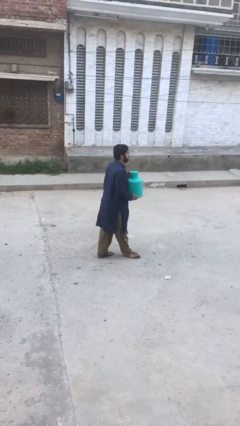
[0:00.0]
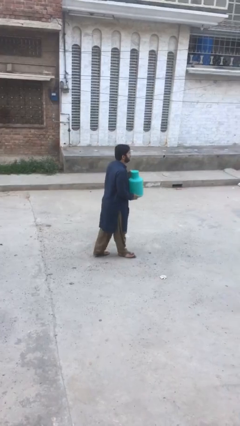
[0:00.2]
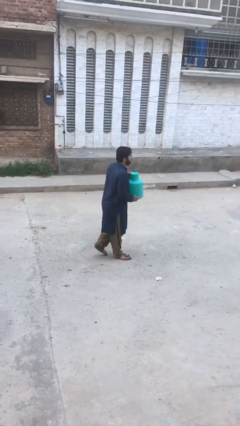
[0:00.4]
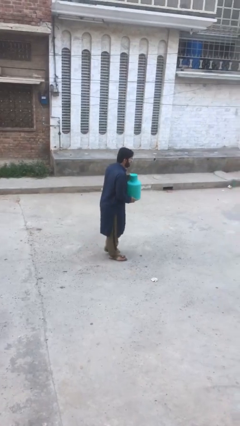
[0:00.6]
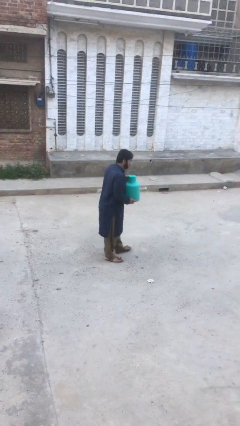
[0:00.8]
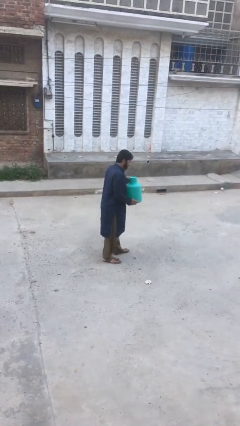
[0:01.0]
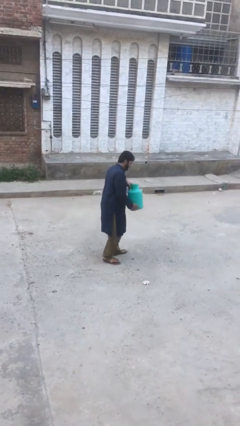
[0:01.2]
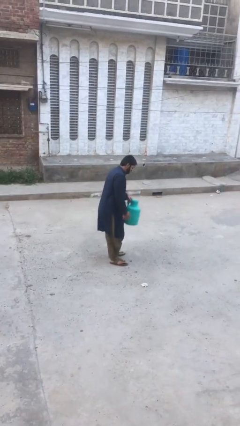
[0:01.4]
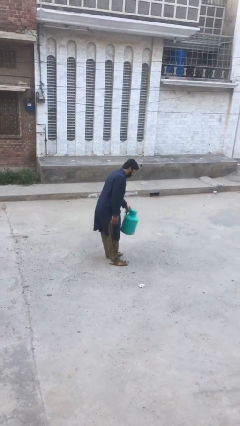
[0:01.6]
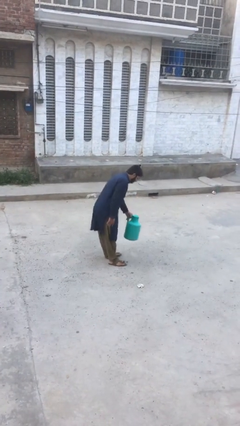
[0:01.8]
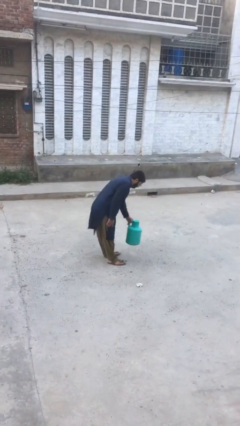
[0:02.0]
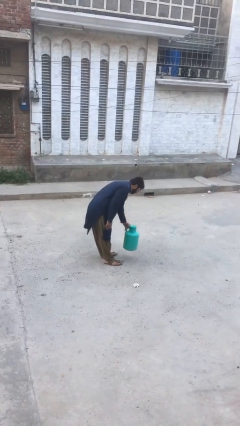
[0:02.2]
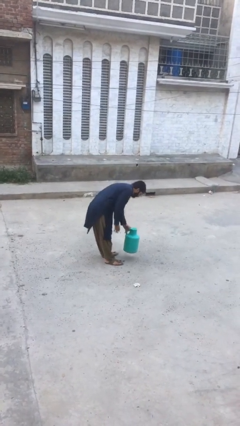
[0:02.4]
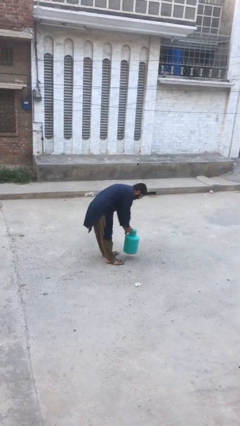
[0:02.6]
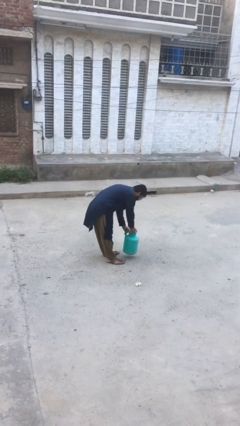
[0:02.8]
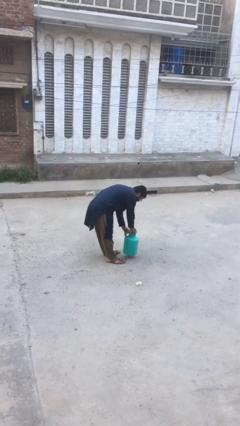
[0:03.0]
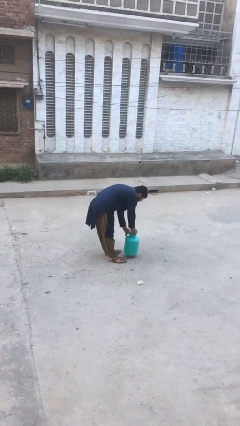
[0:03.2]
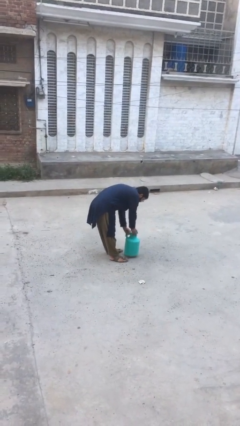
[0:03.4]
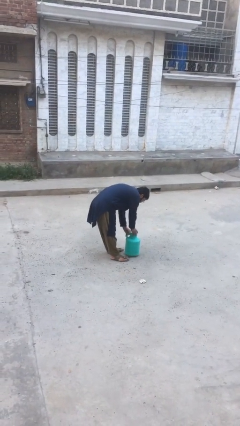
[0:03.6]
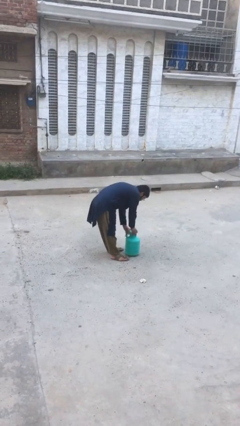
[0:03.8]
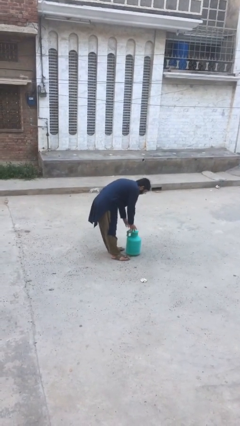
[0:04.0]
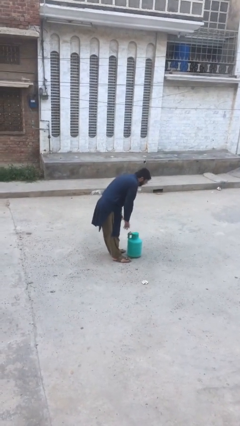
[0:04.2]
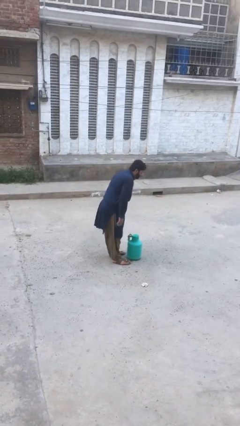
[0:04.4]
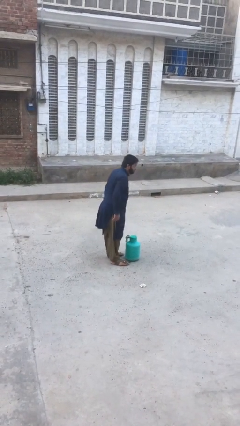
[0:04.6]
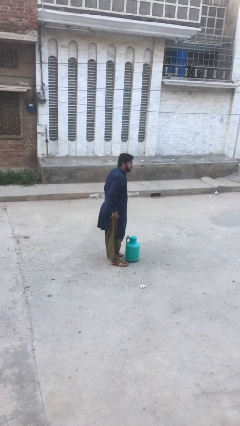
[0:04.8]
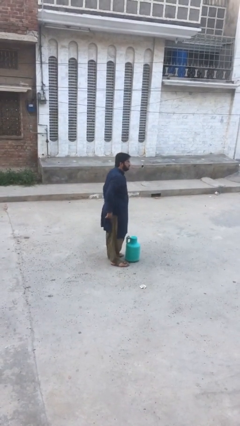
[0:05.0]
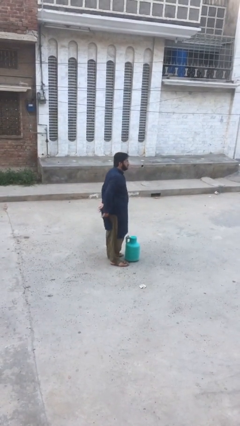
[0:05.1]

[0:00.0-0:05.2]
person puts down object on floor

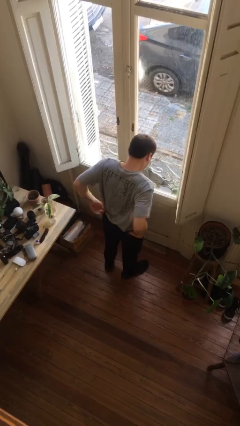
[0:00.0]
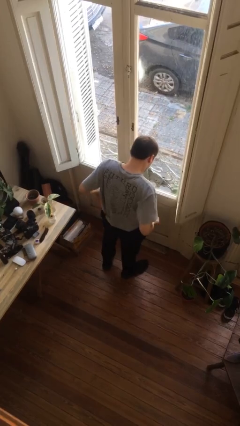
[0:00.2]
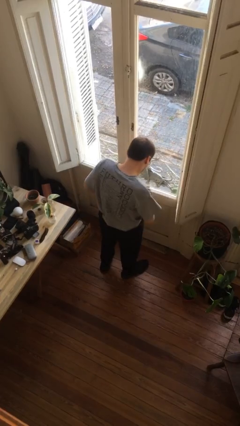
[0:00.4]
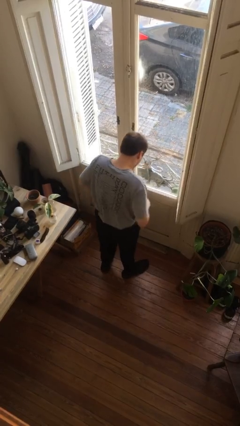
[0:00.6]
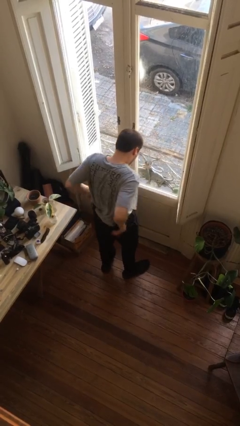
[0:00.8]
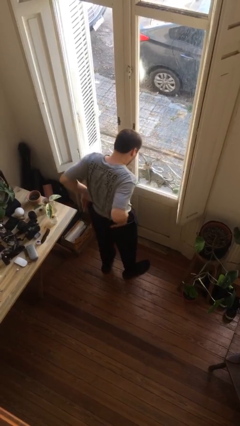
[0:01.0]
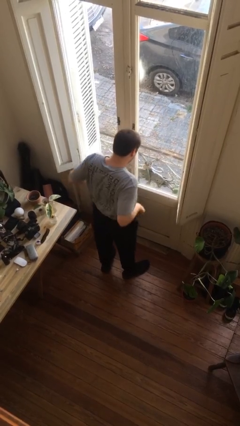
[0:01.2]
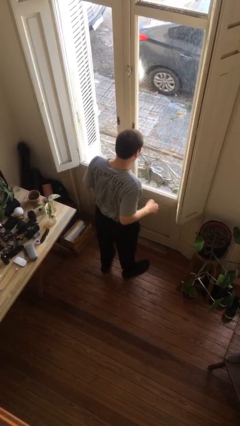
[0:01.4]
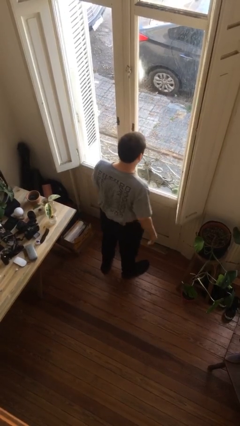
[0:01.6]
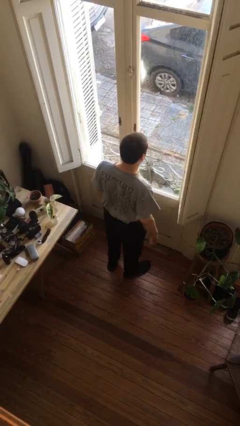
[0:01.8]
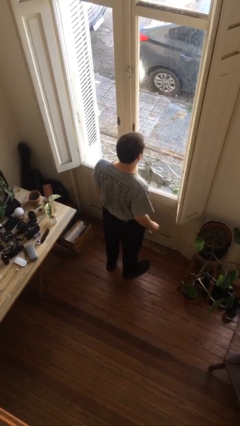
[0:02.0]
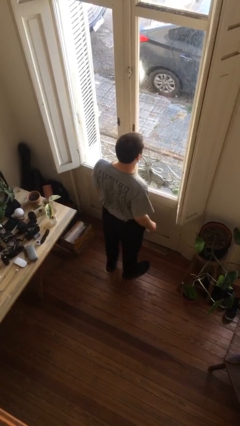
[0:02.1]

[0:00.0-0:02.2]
person hikes up pants

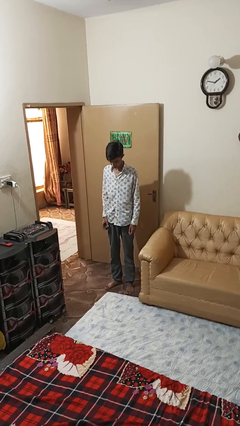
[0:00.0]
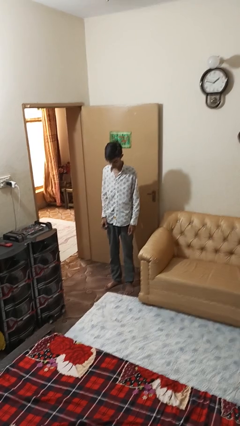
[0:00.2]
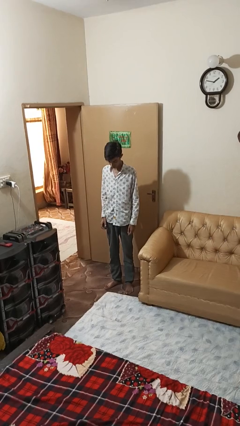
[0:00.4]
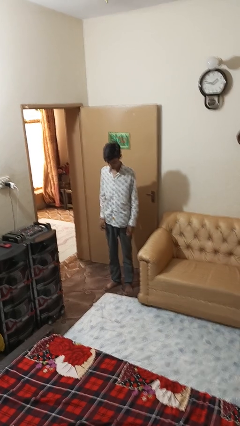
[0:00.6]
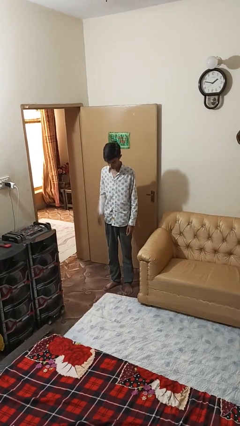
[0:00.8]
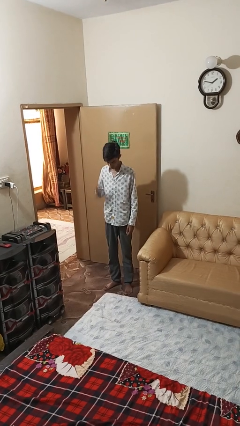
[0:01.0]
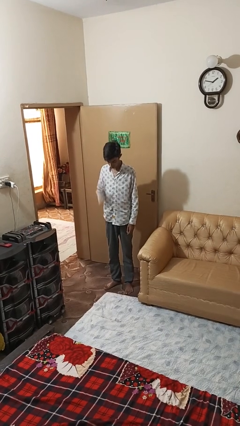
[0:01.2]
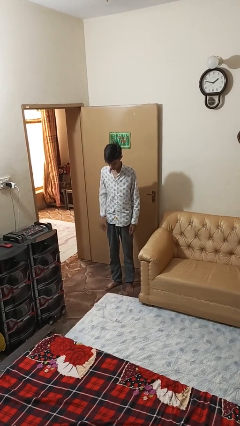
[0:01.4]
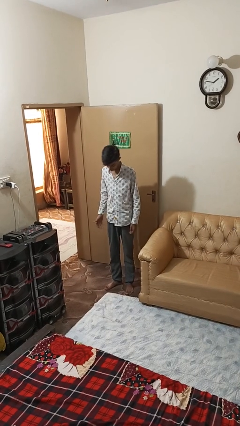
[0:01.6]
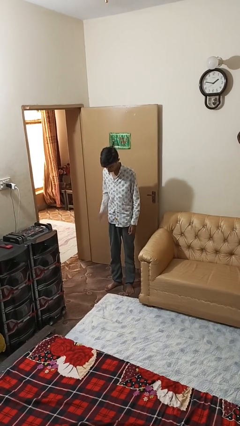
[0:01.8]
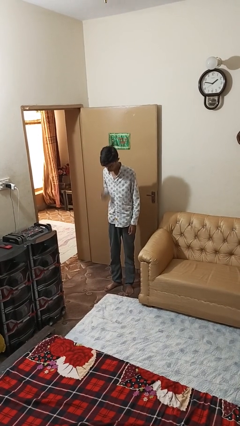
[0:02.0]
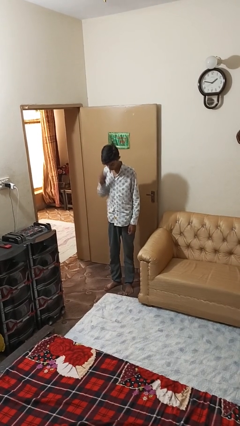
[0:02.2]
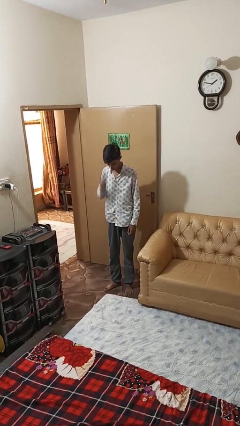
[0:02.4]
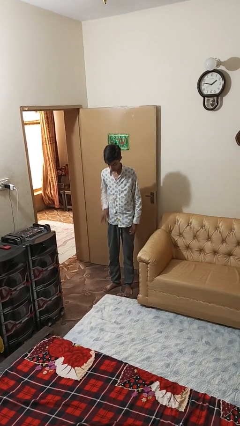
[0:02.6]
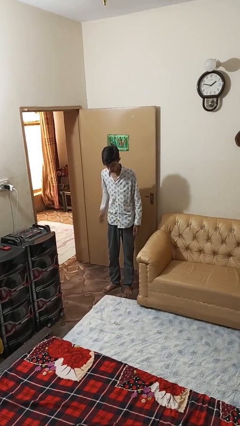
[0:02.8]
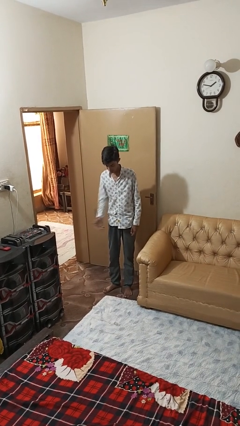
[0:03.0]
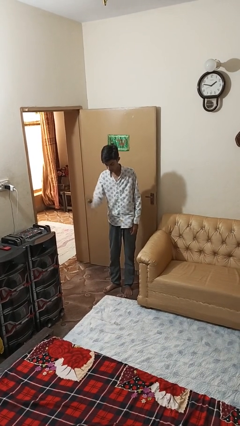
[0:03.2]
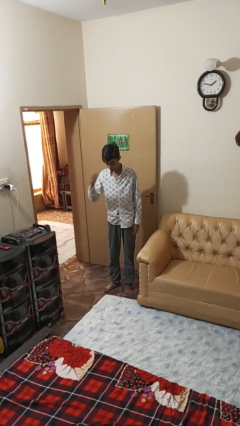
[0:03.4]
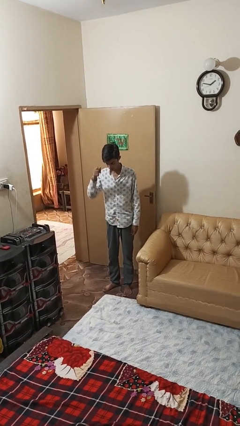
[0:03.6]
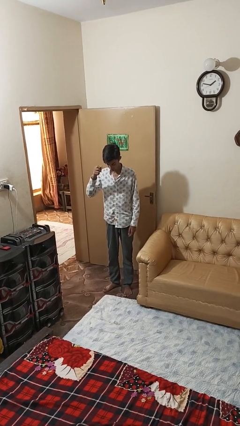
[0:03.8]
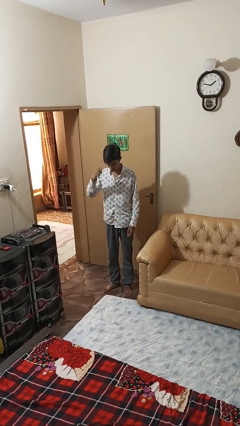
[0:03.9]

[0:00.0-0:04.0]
person bounces ball on floor

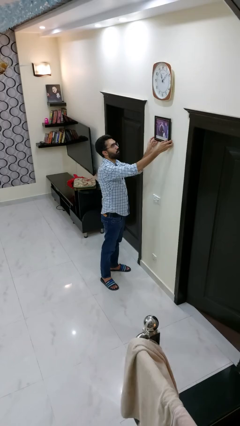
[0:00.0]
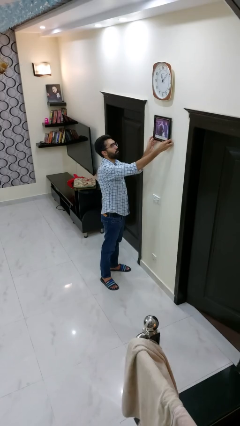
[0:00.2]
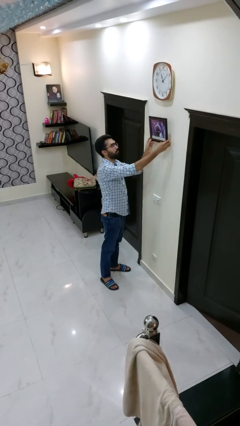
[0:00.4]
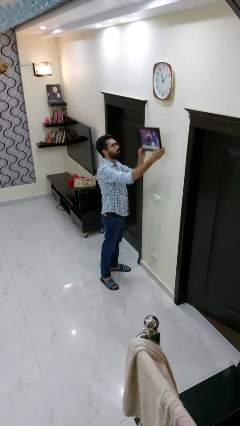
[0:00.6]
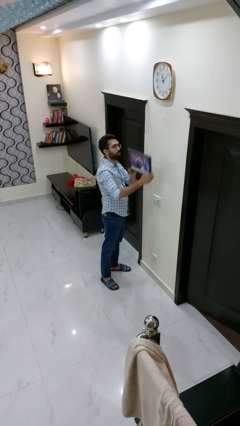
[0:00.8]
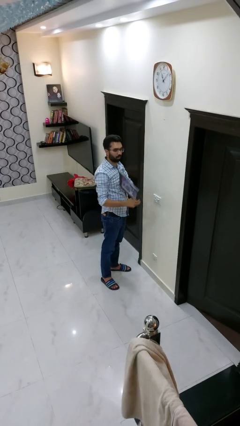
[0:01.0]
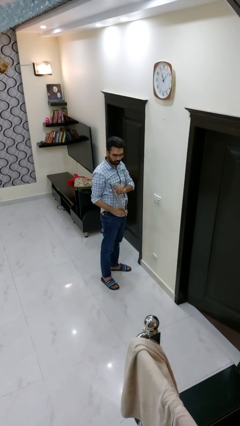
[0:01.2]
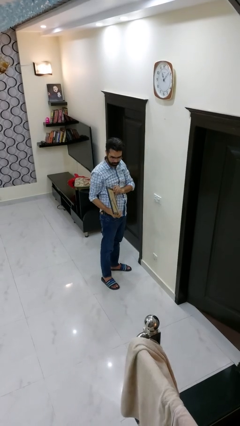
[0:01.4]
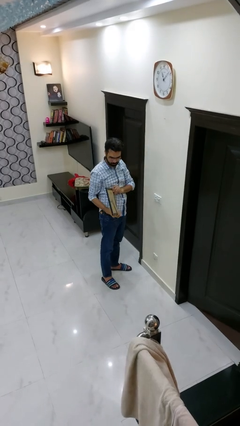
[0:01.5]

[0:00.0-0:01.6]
person takes down picture frame

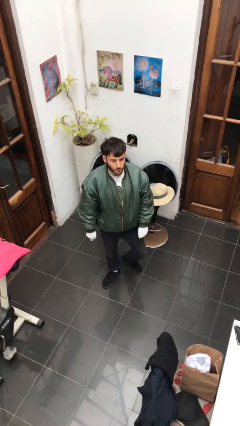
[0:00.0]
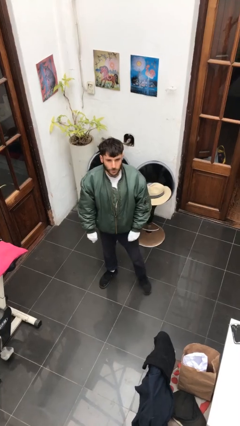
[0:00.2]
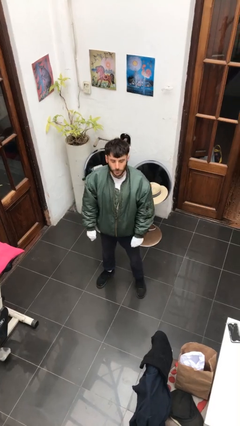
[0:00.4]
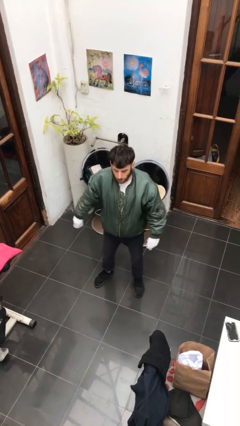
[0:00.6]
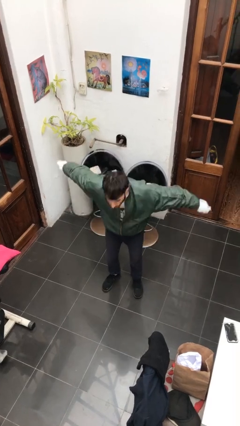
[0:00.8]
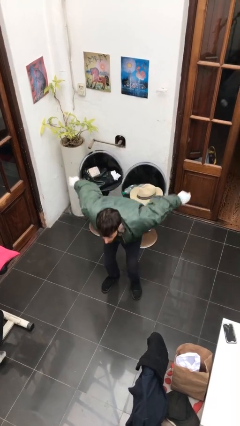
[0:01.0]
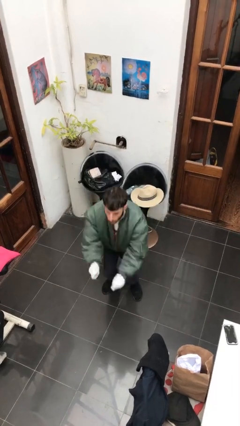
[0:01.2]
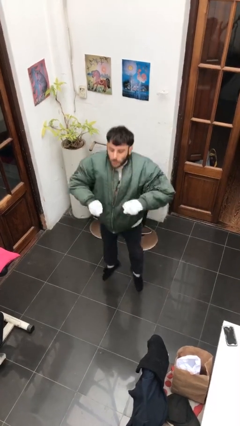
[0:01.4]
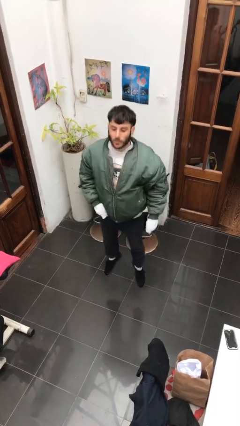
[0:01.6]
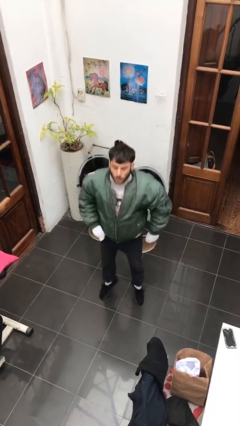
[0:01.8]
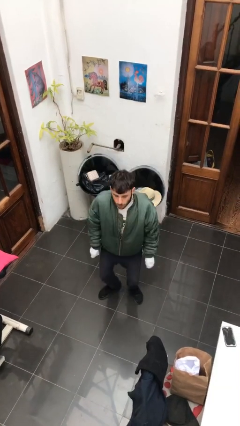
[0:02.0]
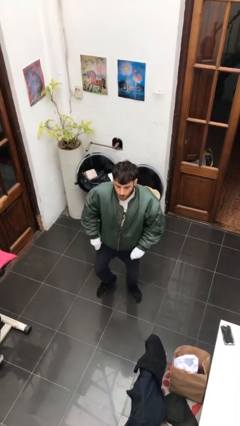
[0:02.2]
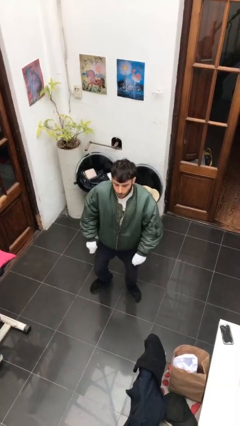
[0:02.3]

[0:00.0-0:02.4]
person jumps

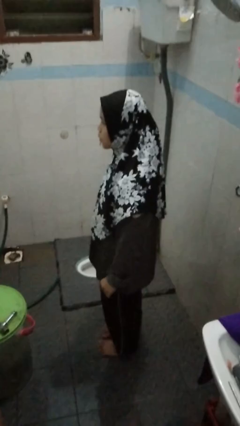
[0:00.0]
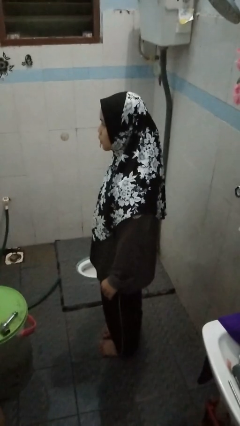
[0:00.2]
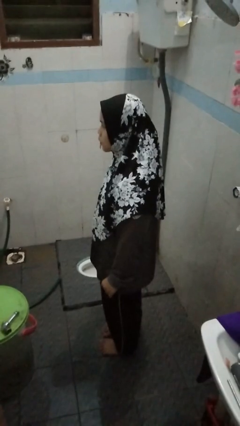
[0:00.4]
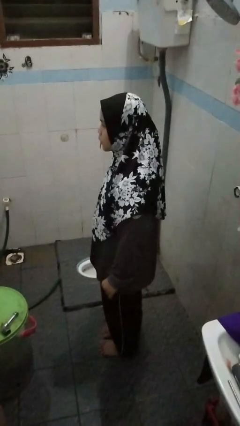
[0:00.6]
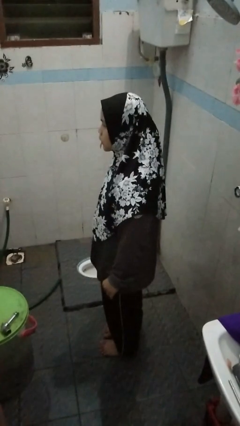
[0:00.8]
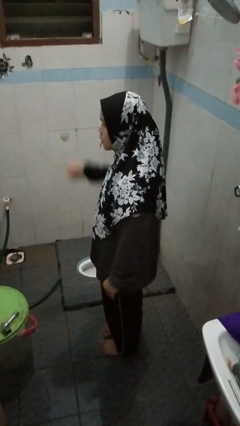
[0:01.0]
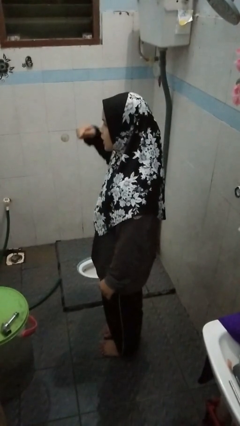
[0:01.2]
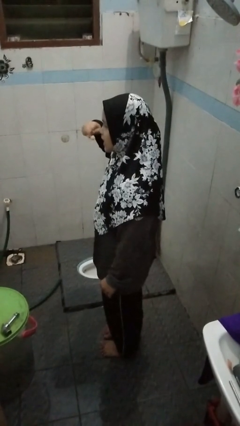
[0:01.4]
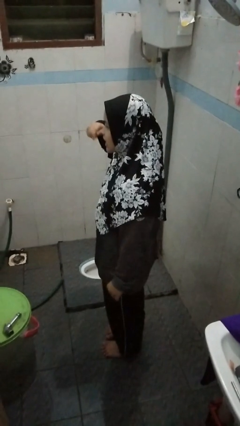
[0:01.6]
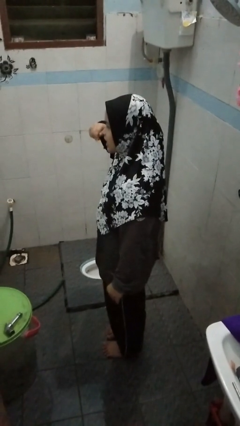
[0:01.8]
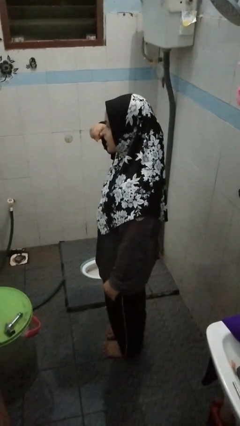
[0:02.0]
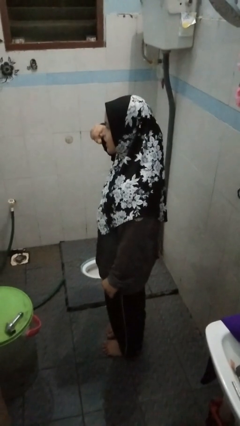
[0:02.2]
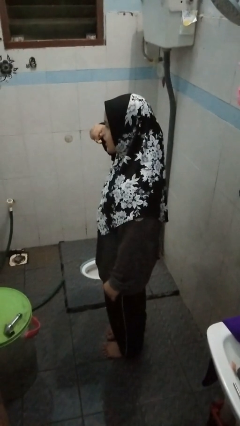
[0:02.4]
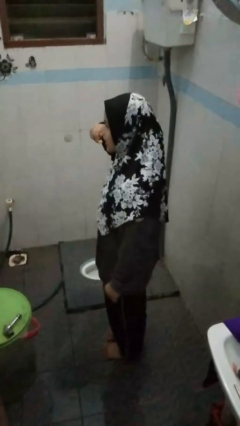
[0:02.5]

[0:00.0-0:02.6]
person brushes teeth
